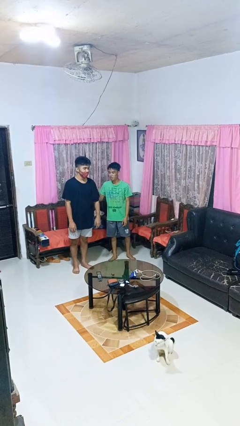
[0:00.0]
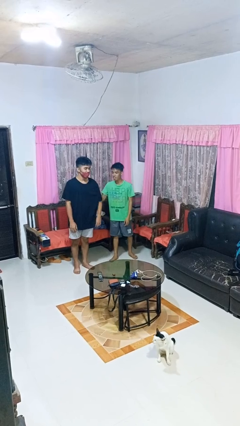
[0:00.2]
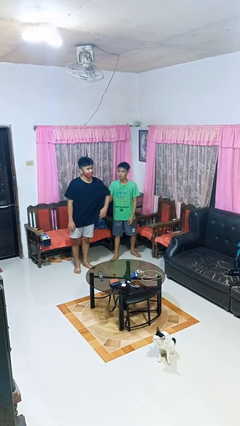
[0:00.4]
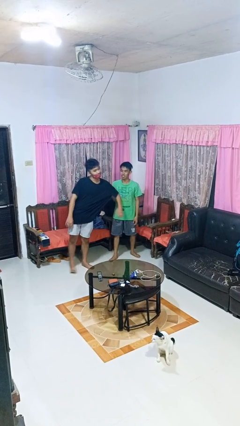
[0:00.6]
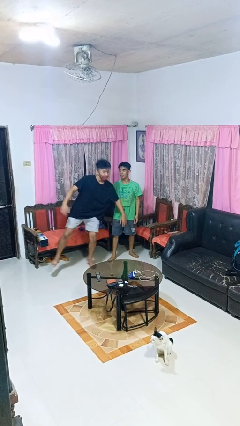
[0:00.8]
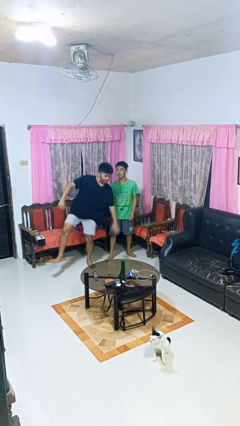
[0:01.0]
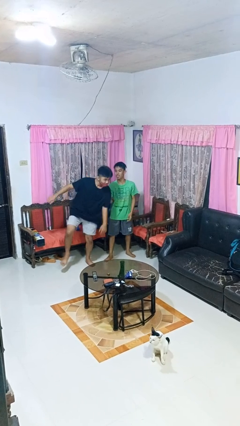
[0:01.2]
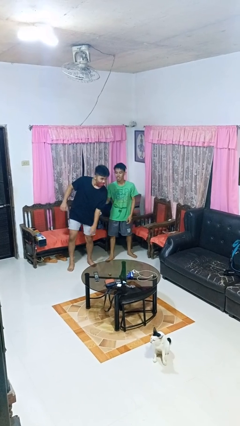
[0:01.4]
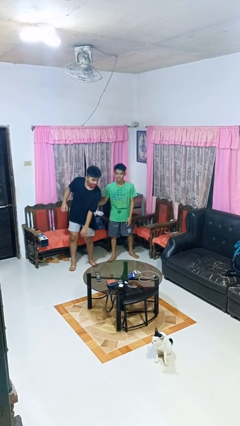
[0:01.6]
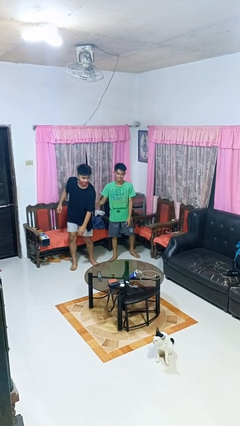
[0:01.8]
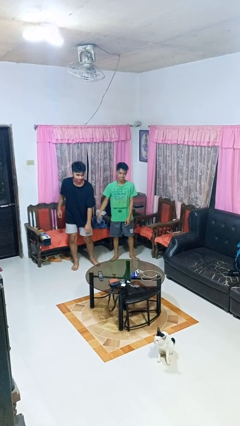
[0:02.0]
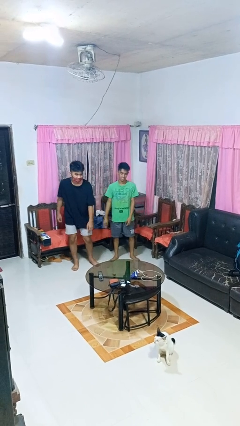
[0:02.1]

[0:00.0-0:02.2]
person grabs person by bicep

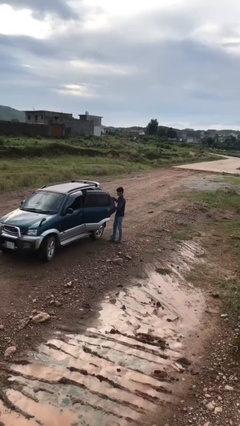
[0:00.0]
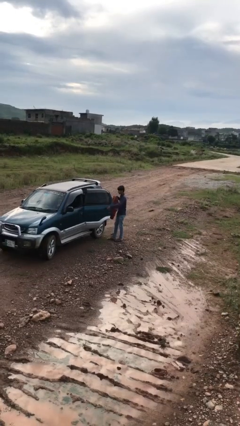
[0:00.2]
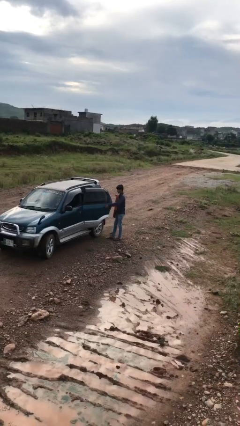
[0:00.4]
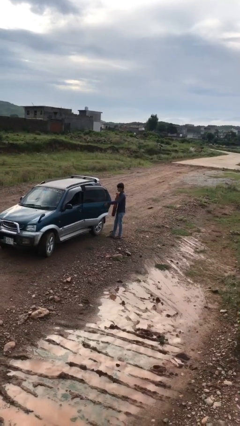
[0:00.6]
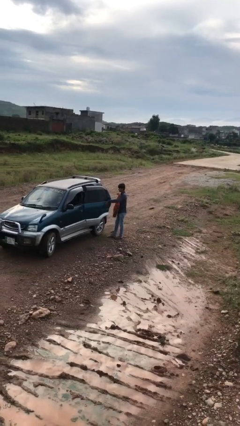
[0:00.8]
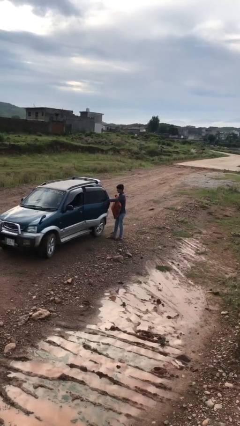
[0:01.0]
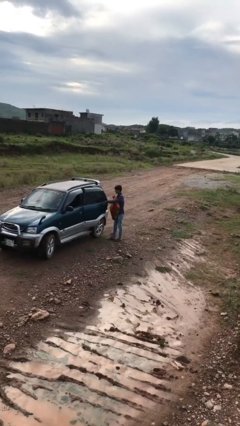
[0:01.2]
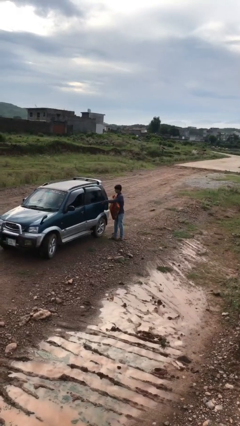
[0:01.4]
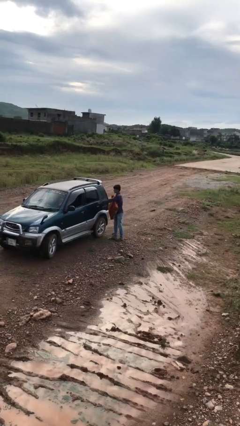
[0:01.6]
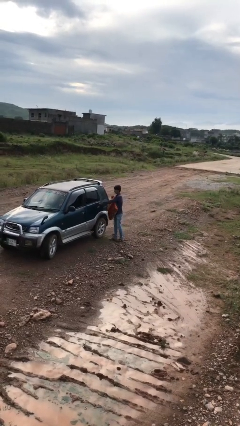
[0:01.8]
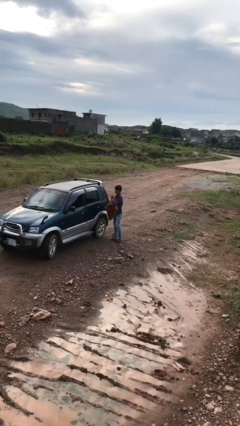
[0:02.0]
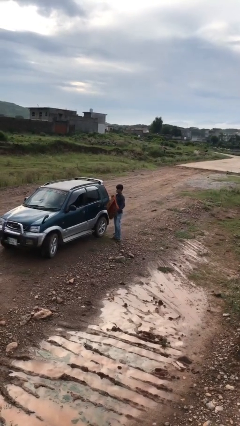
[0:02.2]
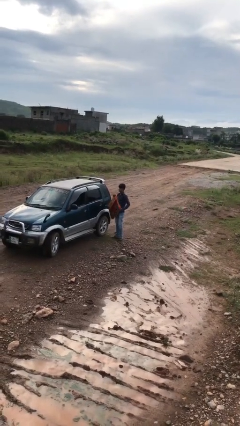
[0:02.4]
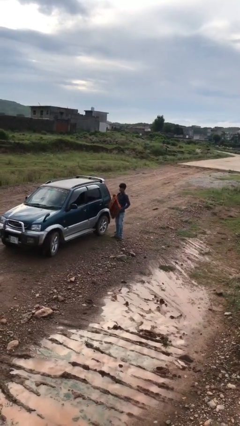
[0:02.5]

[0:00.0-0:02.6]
person closes car door

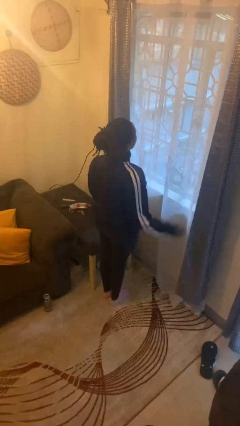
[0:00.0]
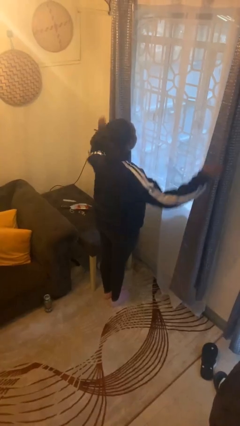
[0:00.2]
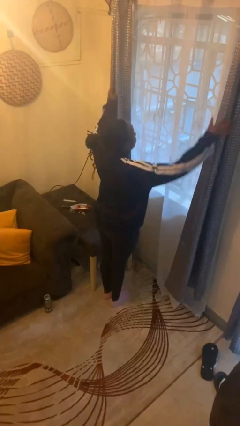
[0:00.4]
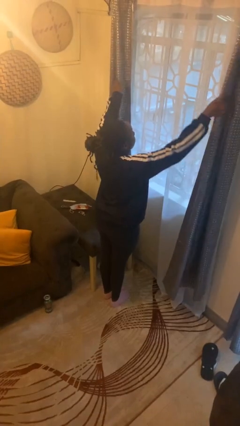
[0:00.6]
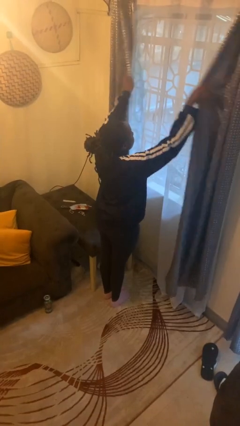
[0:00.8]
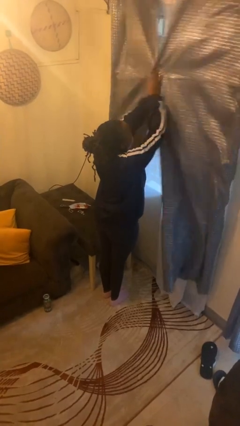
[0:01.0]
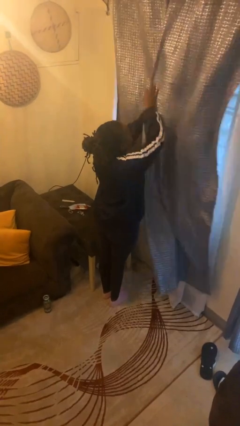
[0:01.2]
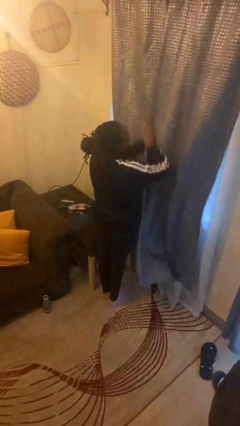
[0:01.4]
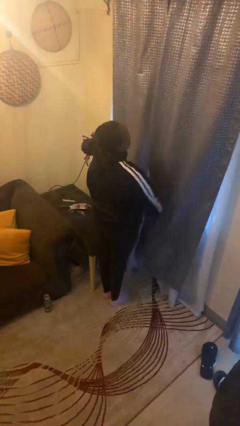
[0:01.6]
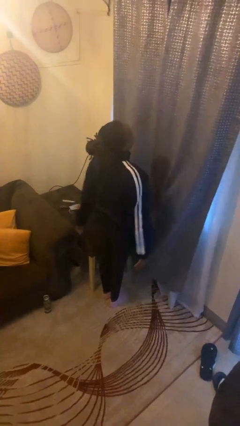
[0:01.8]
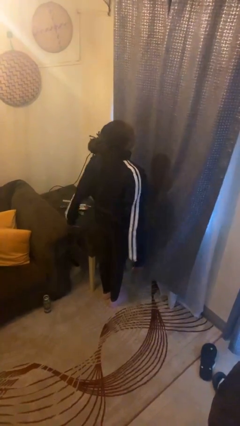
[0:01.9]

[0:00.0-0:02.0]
person closes curtains

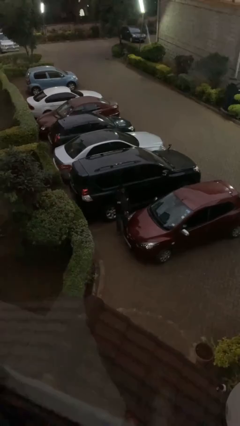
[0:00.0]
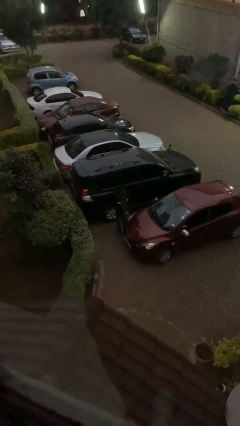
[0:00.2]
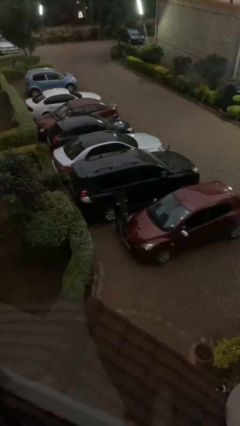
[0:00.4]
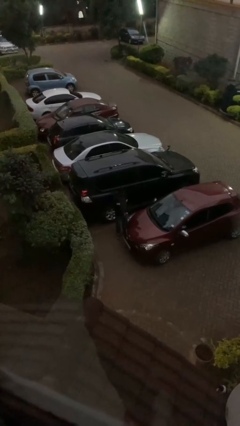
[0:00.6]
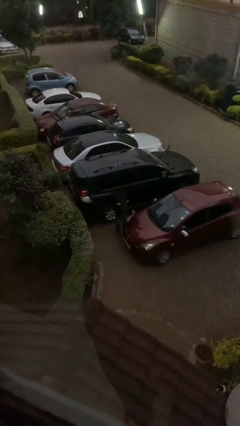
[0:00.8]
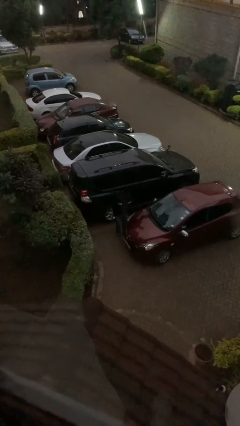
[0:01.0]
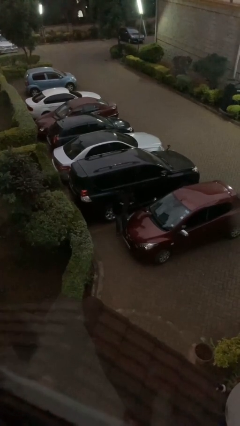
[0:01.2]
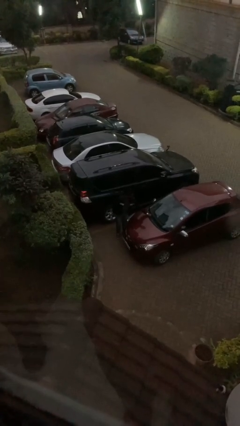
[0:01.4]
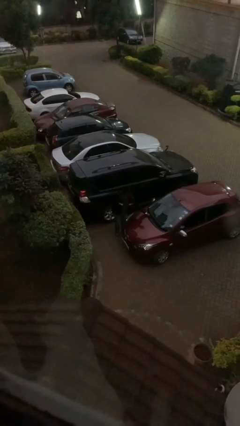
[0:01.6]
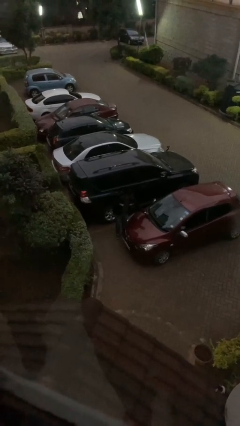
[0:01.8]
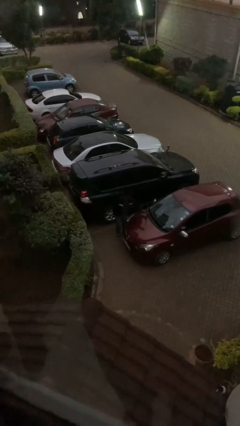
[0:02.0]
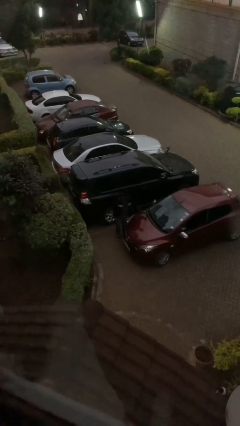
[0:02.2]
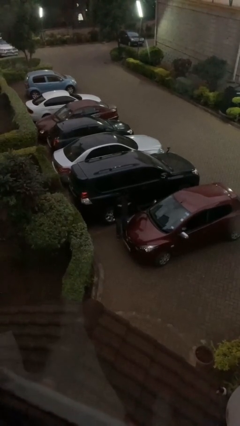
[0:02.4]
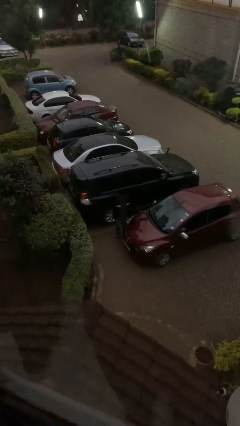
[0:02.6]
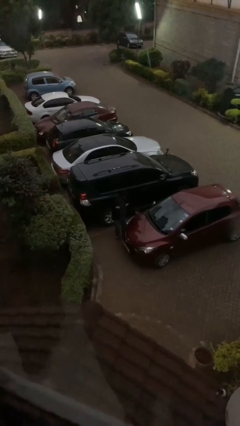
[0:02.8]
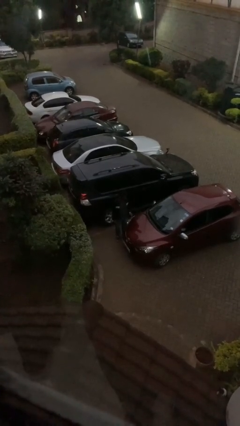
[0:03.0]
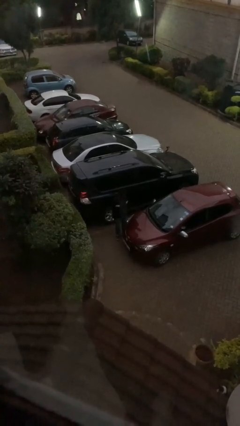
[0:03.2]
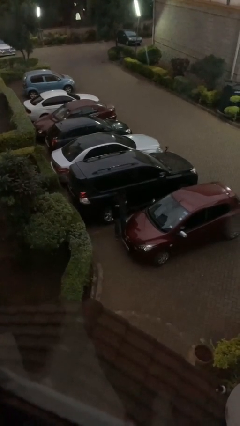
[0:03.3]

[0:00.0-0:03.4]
person flips up car wipers

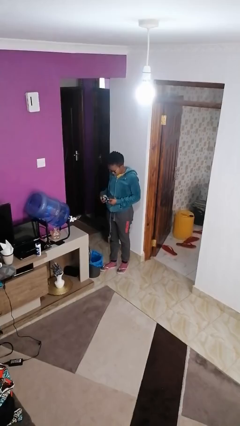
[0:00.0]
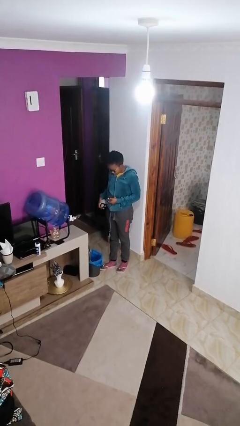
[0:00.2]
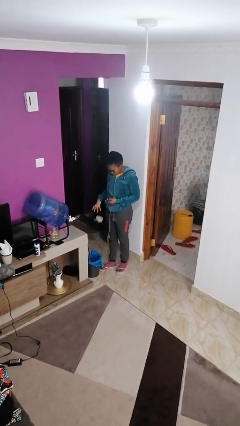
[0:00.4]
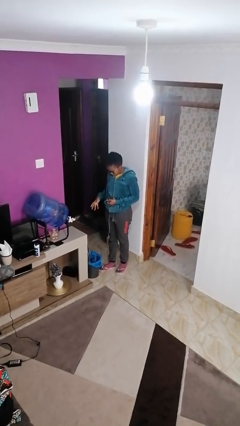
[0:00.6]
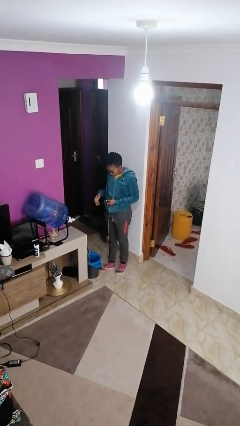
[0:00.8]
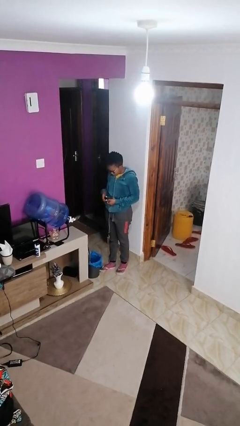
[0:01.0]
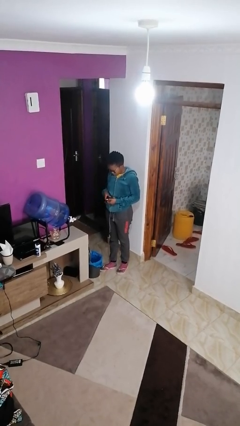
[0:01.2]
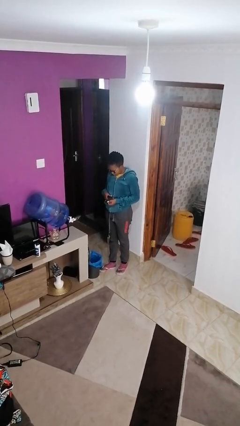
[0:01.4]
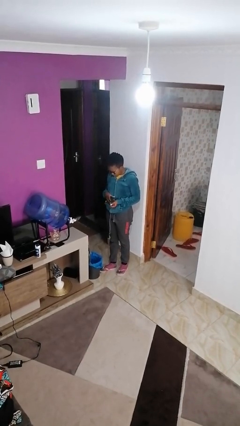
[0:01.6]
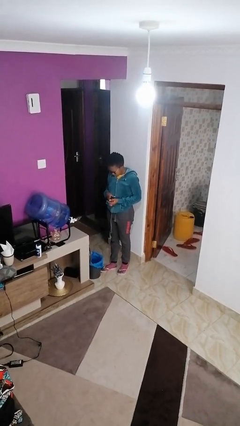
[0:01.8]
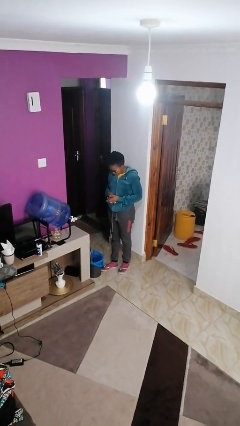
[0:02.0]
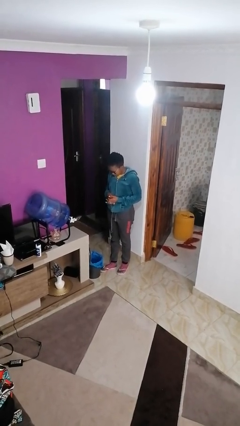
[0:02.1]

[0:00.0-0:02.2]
person discards trash

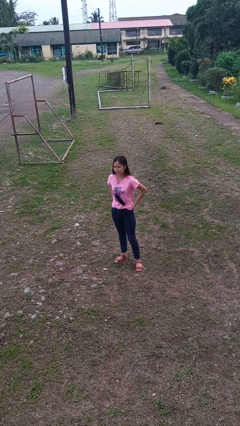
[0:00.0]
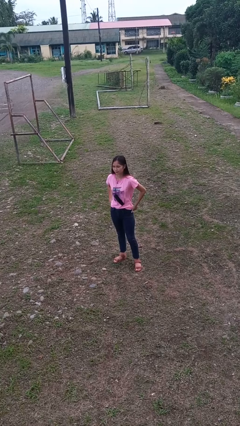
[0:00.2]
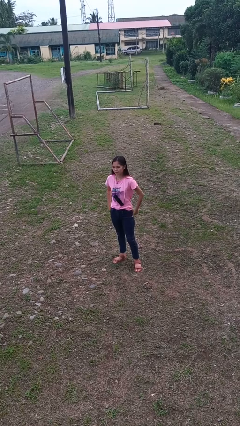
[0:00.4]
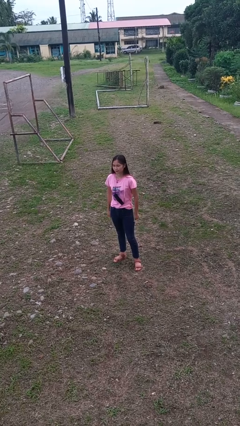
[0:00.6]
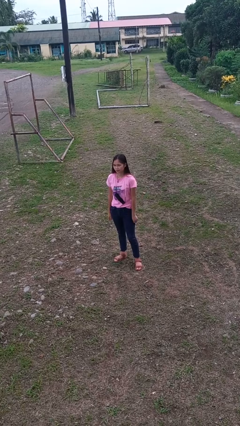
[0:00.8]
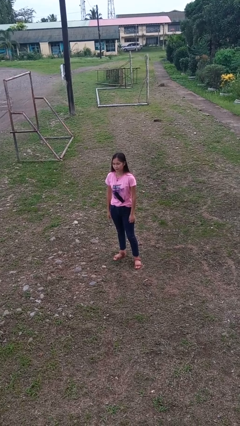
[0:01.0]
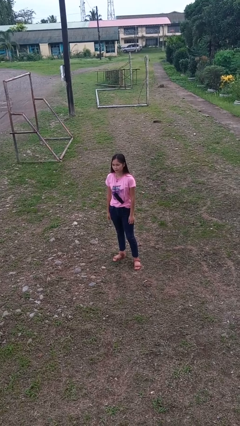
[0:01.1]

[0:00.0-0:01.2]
person puts hands in back pockets

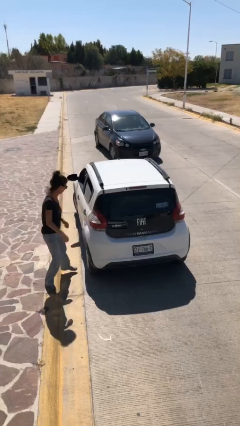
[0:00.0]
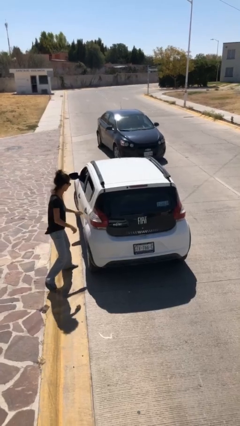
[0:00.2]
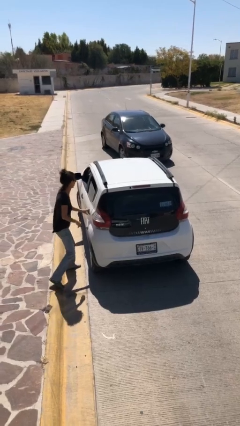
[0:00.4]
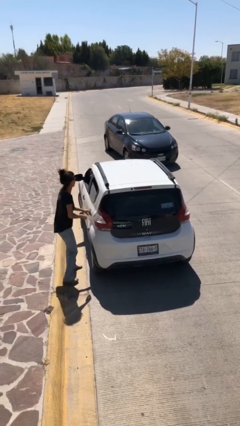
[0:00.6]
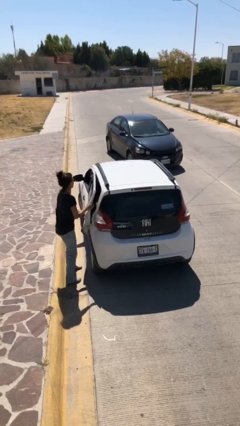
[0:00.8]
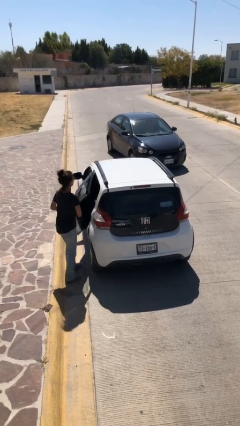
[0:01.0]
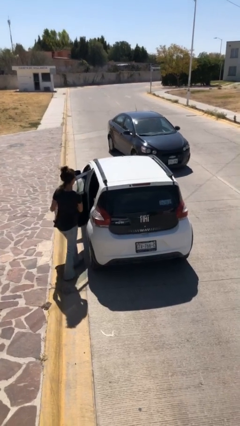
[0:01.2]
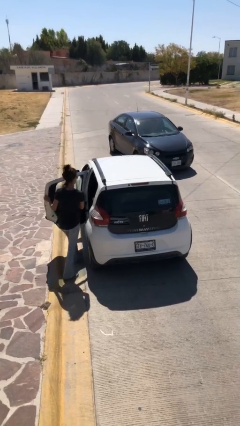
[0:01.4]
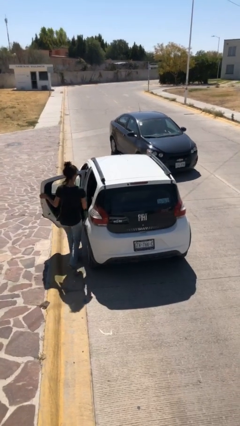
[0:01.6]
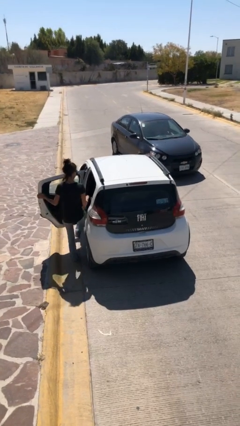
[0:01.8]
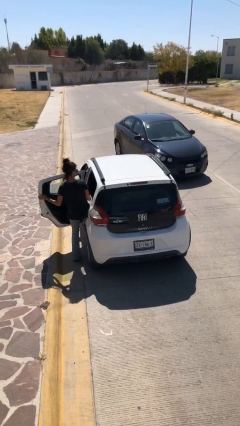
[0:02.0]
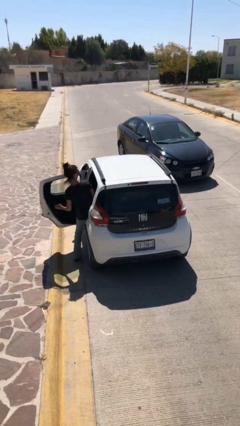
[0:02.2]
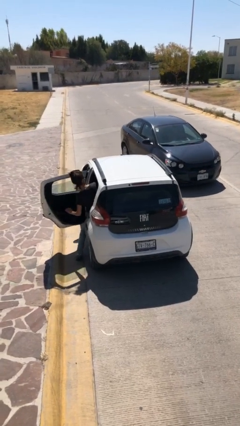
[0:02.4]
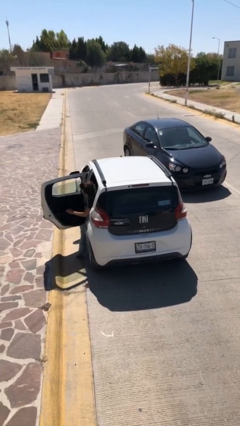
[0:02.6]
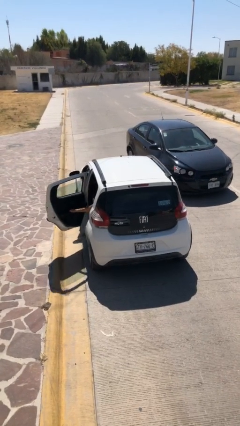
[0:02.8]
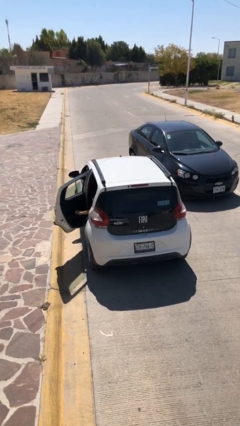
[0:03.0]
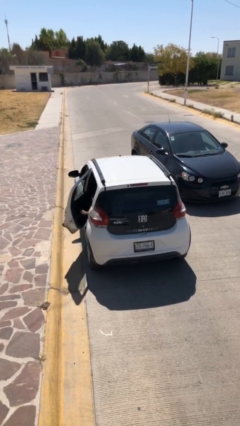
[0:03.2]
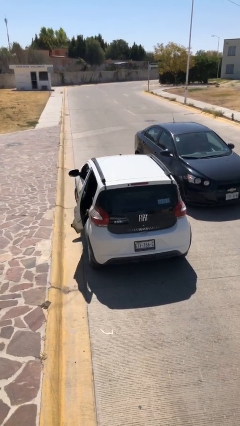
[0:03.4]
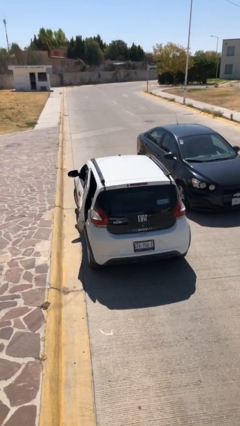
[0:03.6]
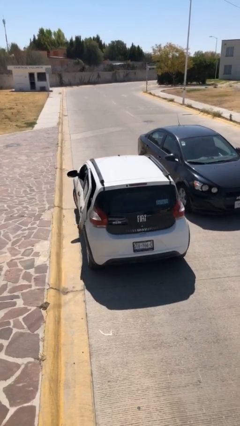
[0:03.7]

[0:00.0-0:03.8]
car picks up person
